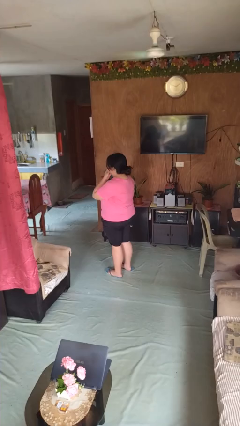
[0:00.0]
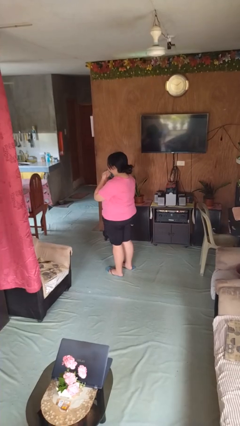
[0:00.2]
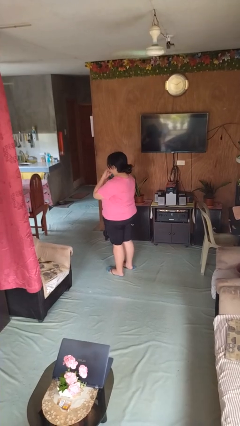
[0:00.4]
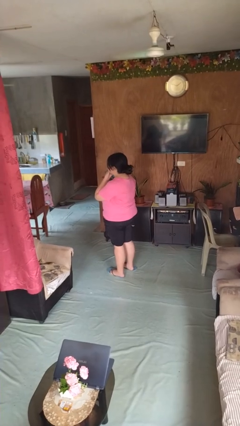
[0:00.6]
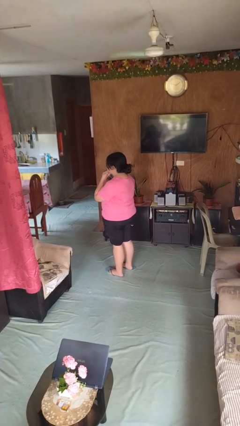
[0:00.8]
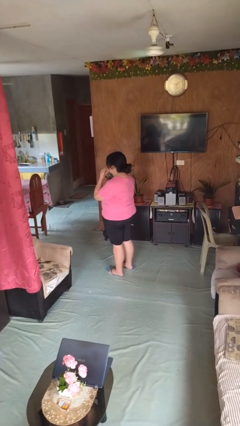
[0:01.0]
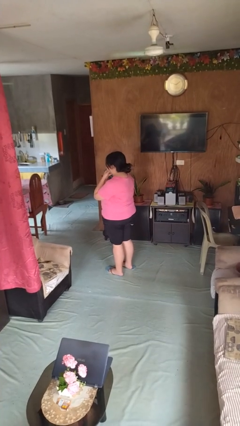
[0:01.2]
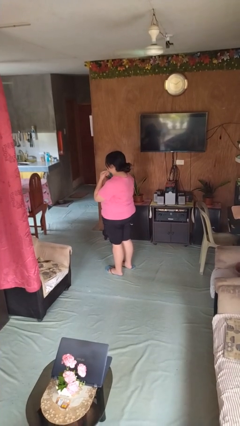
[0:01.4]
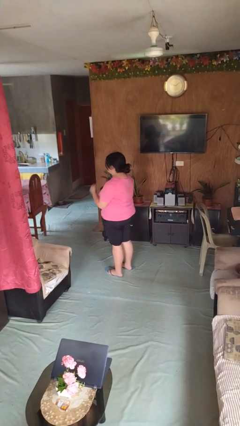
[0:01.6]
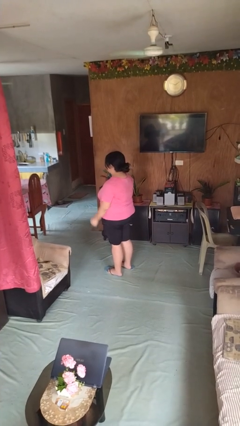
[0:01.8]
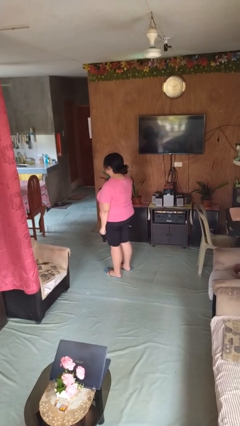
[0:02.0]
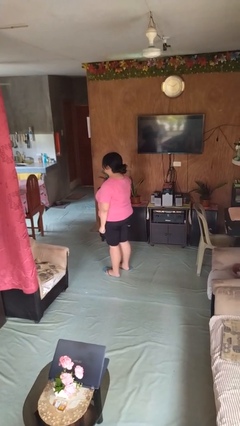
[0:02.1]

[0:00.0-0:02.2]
person strokes chin

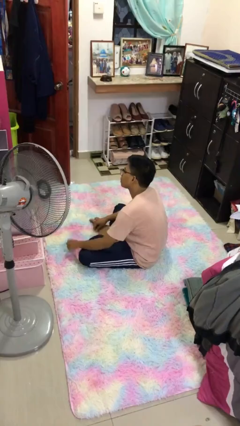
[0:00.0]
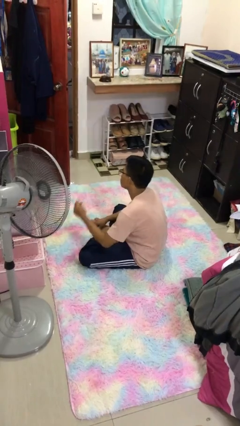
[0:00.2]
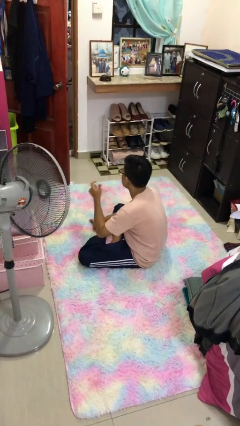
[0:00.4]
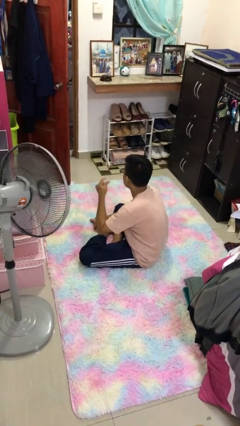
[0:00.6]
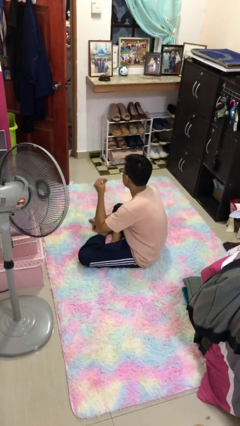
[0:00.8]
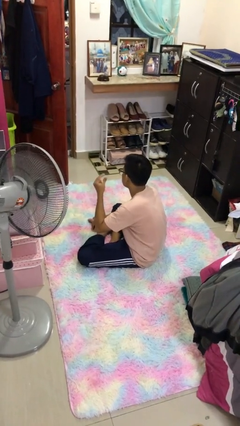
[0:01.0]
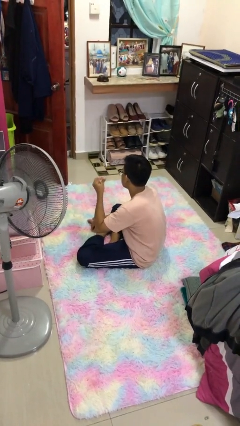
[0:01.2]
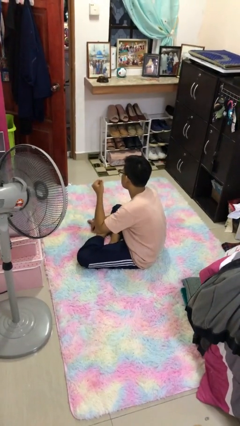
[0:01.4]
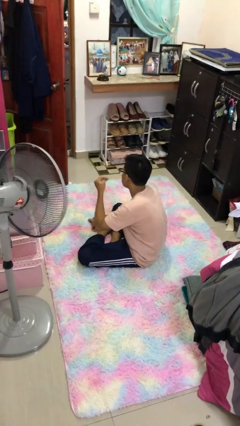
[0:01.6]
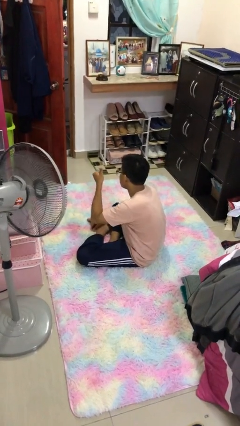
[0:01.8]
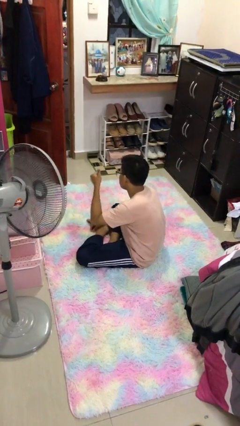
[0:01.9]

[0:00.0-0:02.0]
person snaps fingers

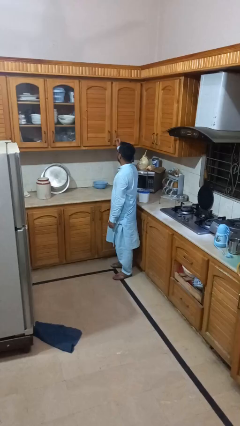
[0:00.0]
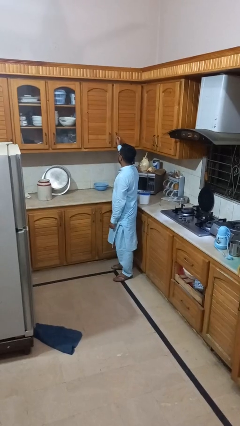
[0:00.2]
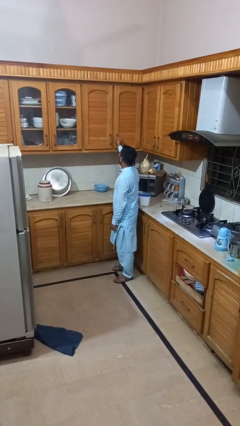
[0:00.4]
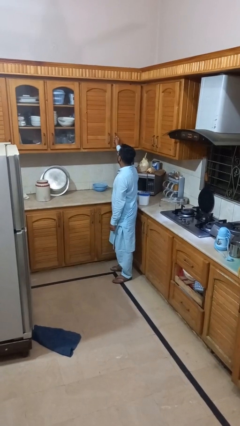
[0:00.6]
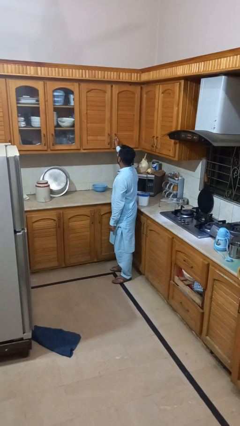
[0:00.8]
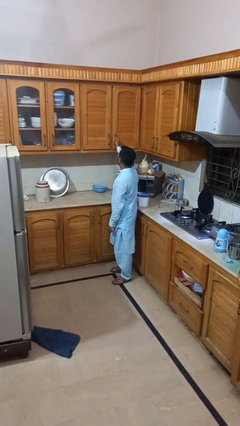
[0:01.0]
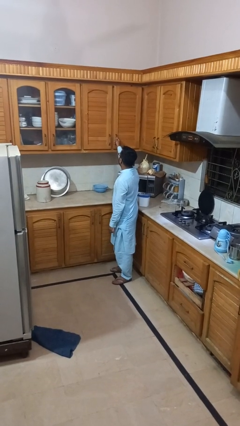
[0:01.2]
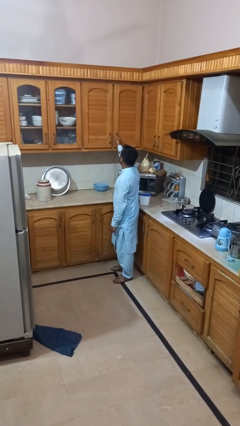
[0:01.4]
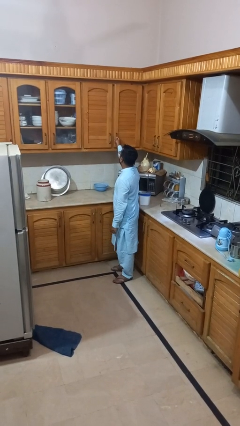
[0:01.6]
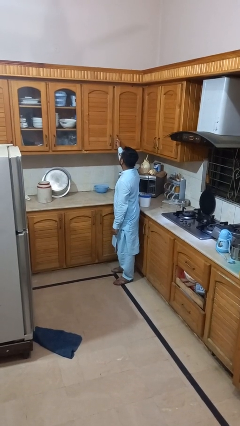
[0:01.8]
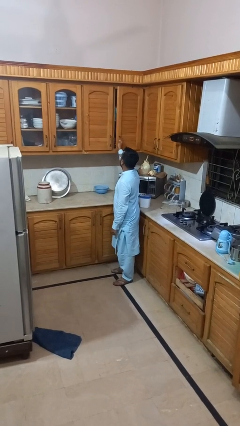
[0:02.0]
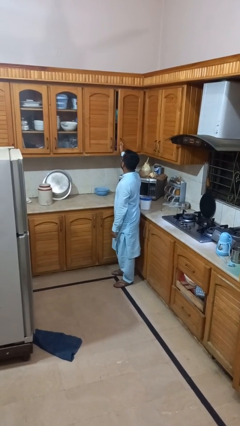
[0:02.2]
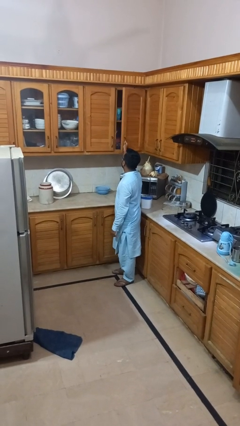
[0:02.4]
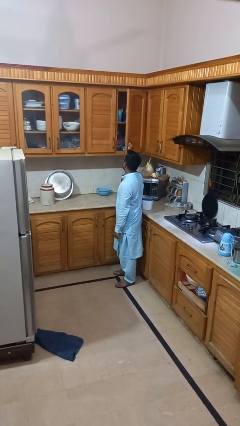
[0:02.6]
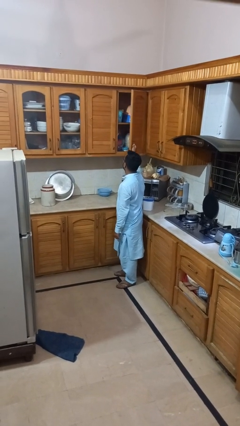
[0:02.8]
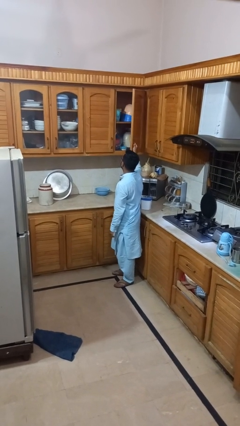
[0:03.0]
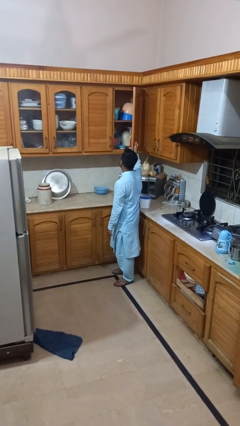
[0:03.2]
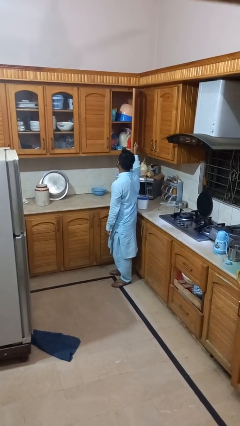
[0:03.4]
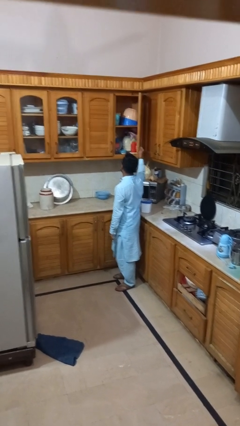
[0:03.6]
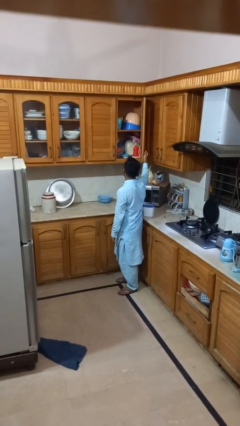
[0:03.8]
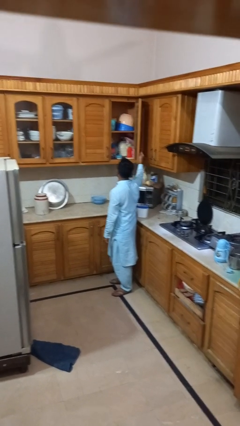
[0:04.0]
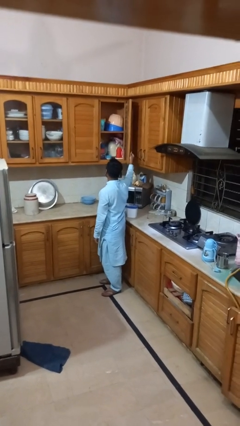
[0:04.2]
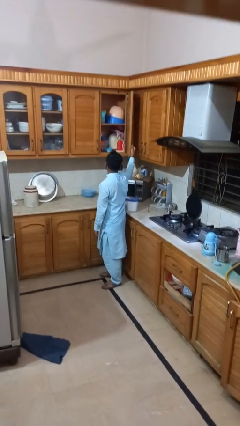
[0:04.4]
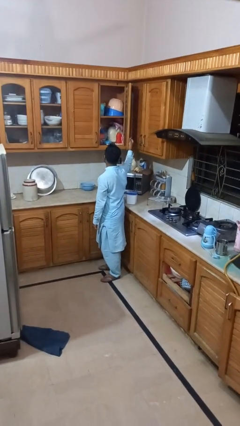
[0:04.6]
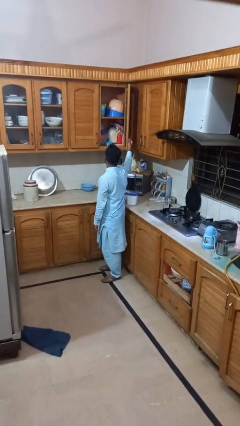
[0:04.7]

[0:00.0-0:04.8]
person opens cabinet

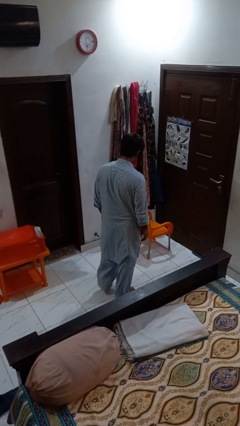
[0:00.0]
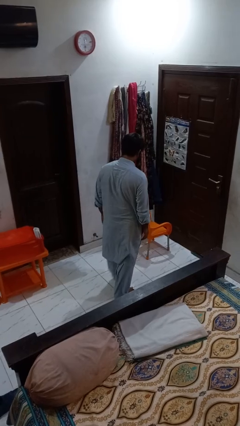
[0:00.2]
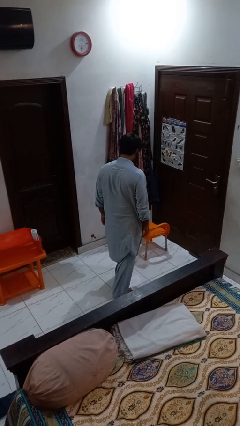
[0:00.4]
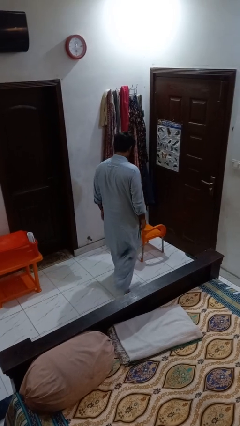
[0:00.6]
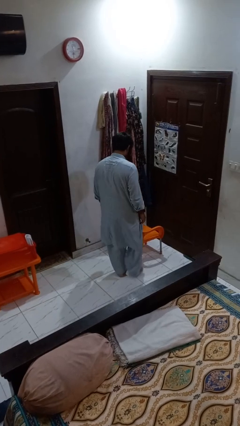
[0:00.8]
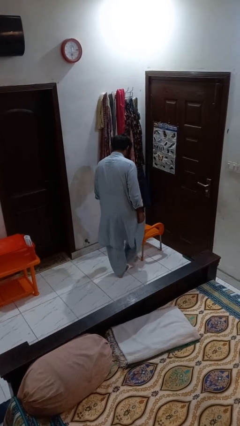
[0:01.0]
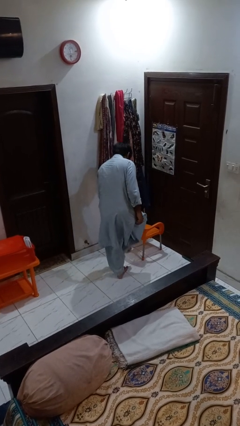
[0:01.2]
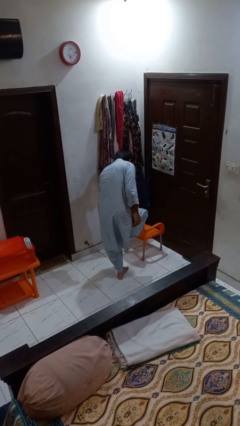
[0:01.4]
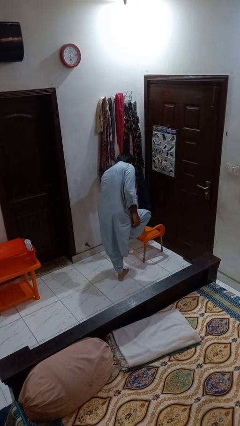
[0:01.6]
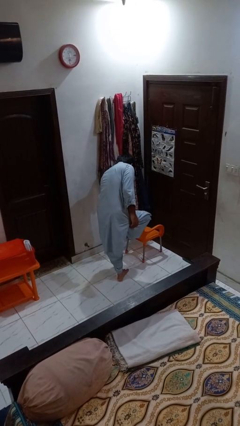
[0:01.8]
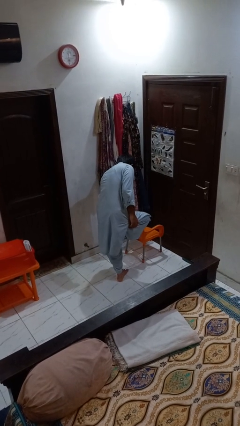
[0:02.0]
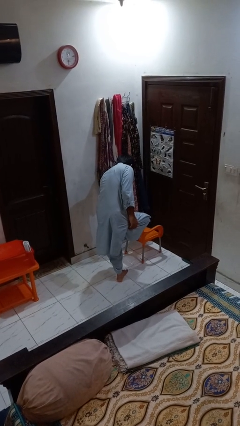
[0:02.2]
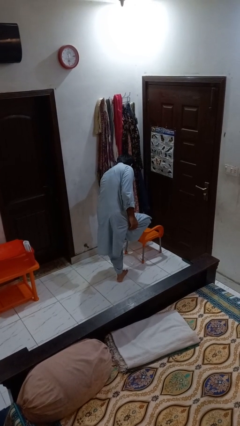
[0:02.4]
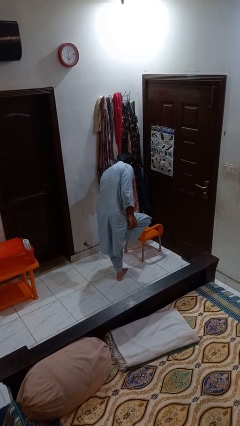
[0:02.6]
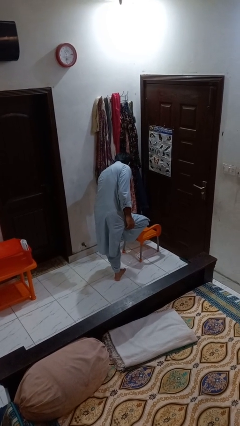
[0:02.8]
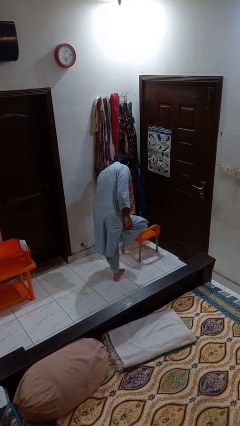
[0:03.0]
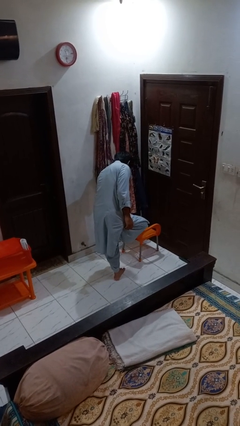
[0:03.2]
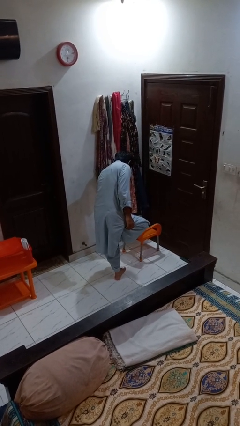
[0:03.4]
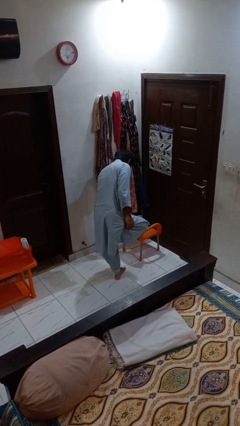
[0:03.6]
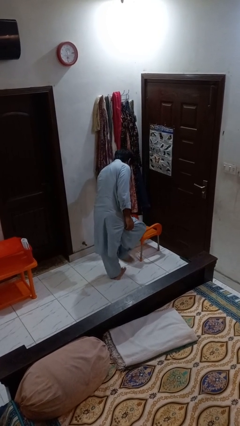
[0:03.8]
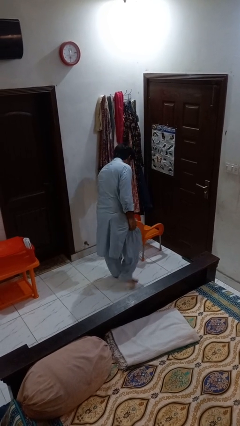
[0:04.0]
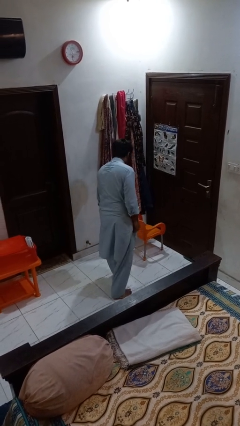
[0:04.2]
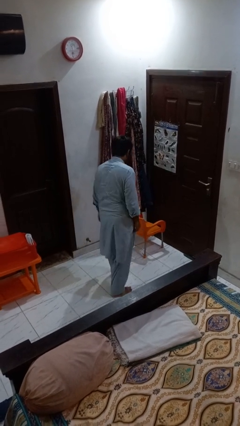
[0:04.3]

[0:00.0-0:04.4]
person stubs toe

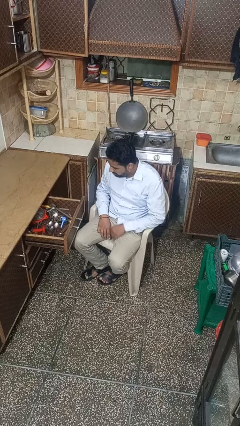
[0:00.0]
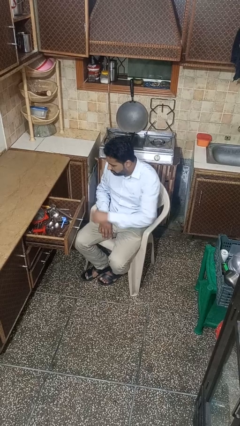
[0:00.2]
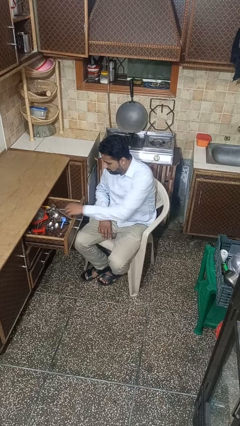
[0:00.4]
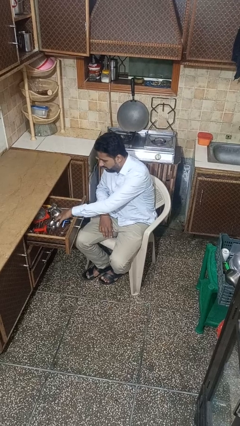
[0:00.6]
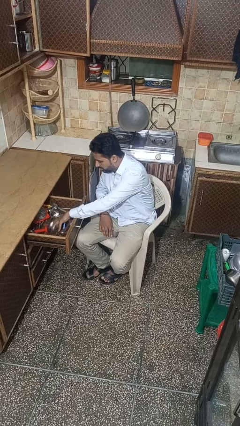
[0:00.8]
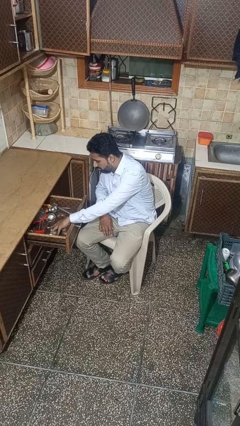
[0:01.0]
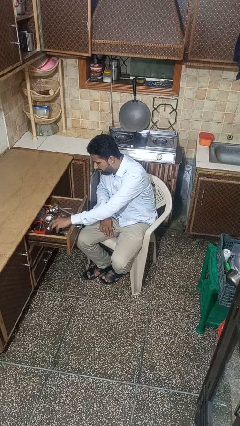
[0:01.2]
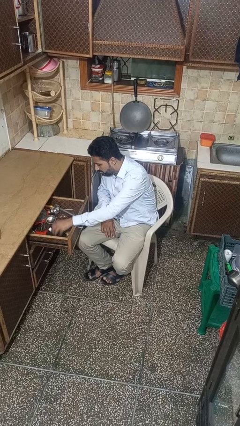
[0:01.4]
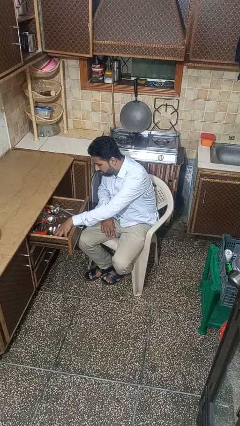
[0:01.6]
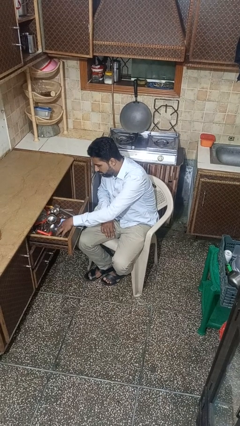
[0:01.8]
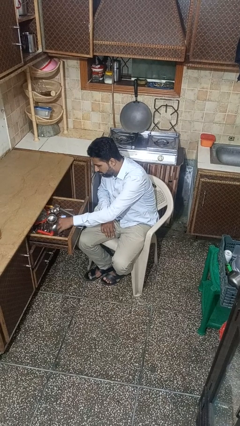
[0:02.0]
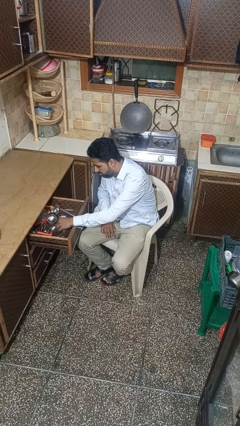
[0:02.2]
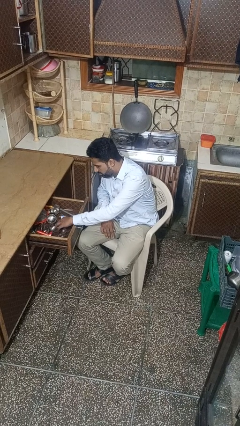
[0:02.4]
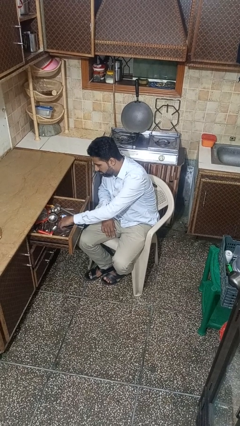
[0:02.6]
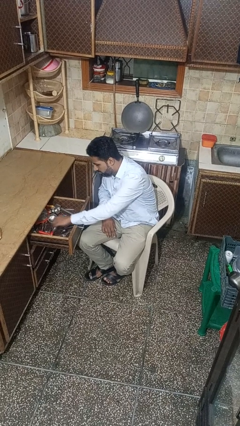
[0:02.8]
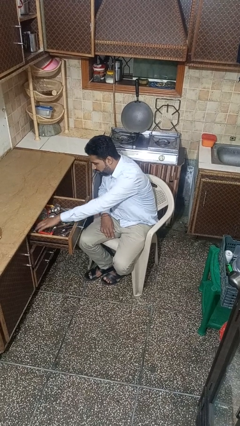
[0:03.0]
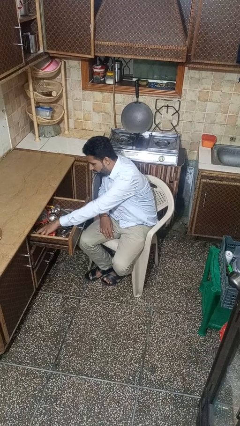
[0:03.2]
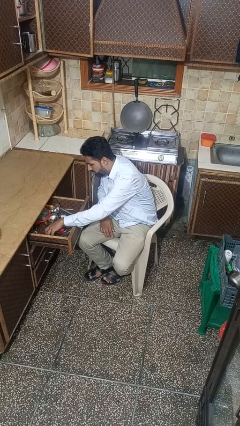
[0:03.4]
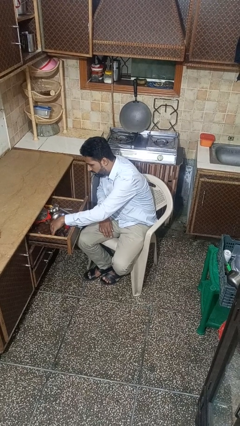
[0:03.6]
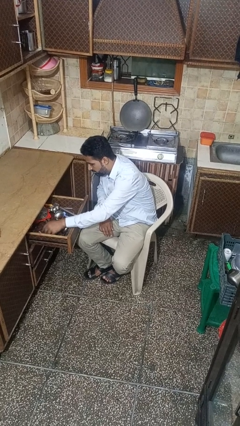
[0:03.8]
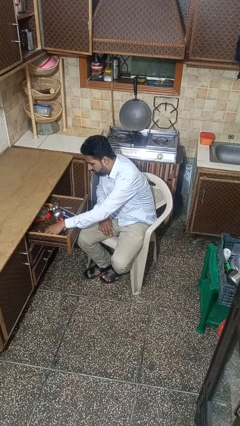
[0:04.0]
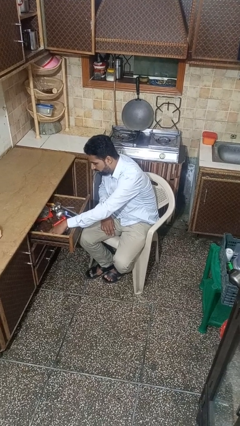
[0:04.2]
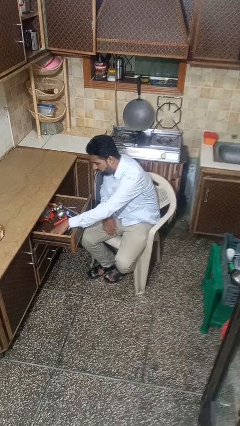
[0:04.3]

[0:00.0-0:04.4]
person searches in kitchen drawer
